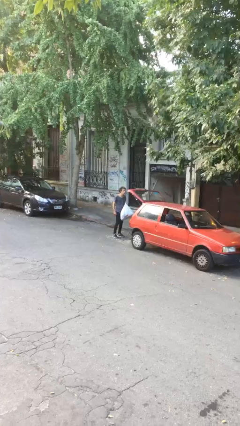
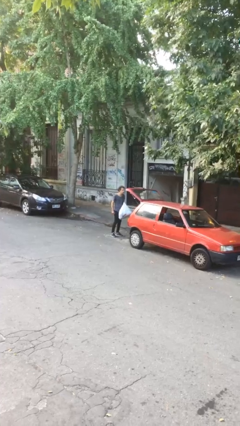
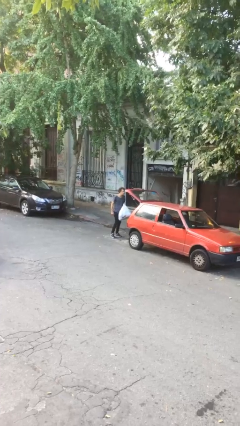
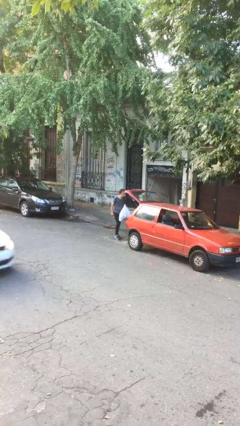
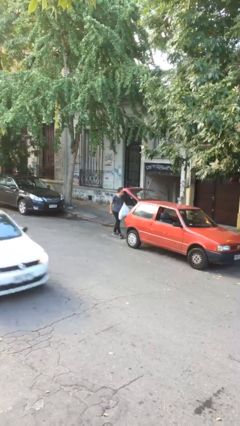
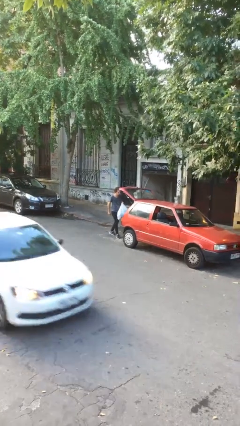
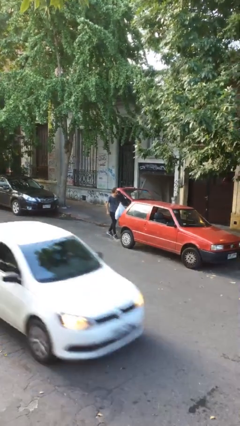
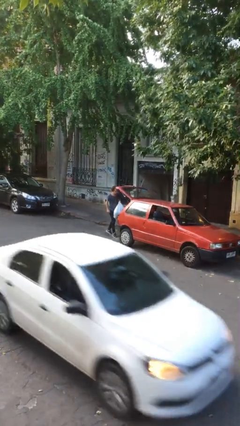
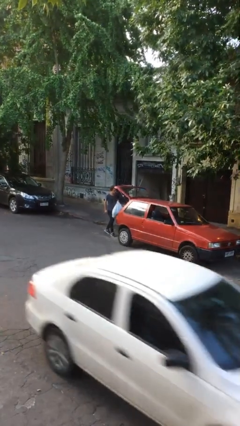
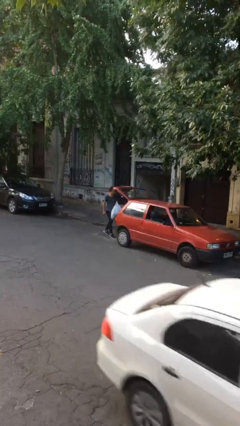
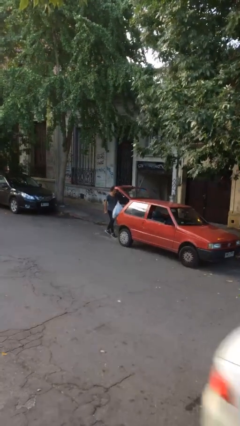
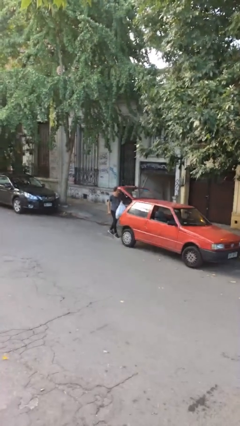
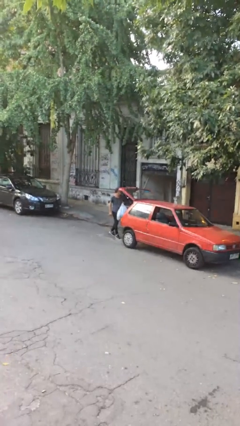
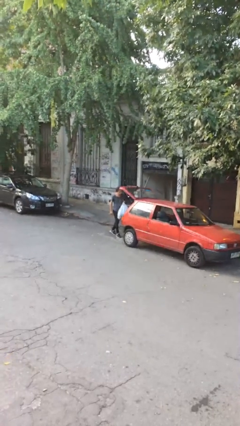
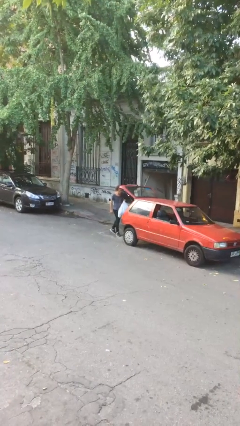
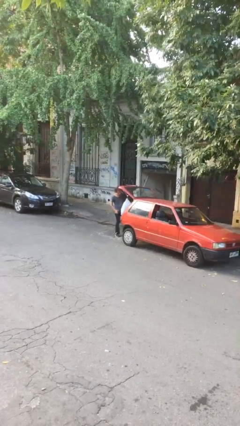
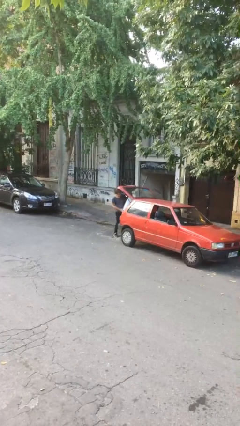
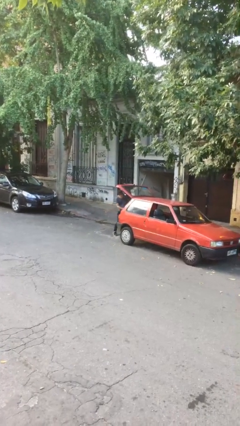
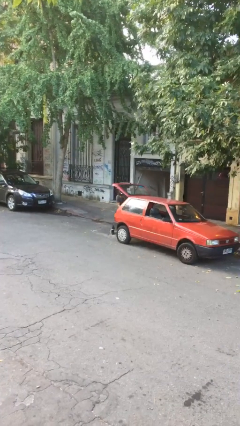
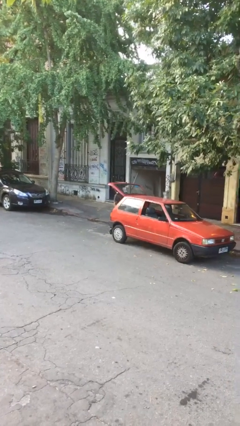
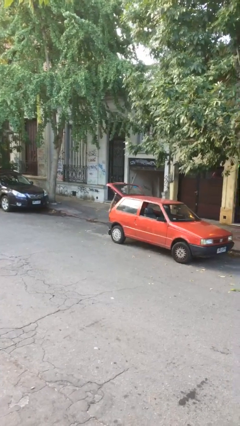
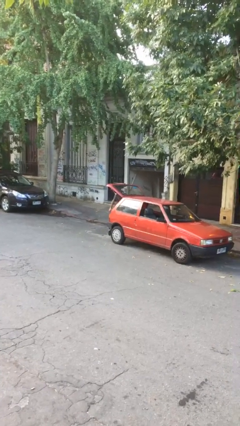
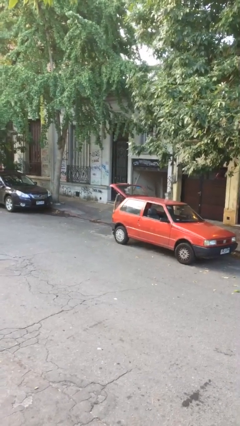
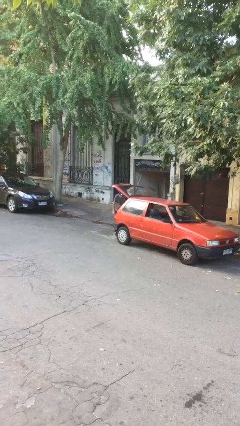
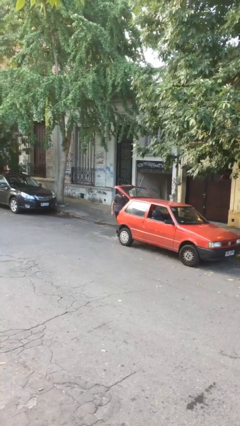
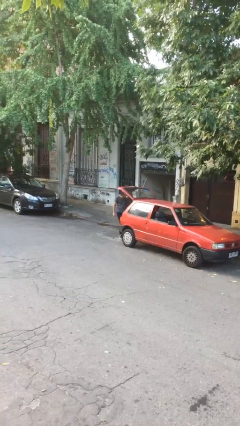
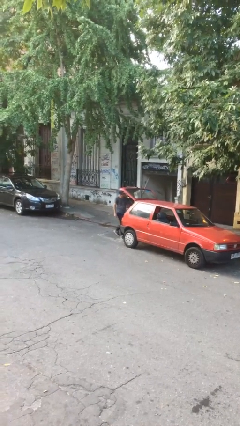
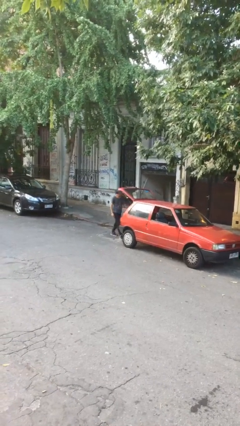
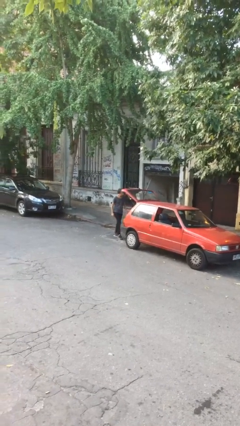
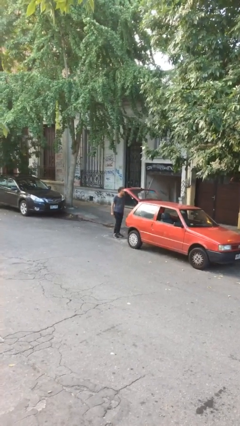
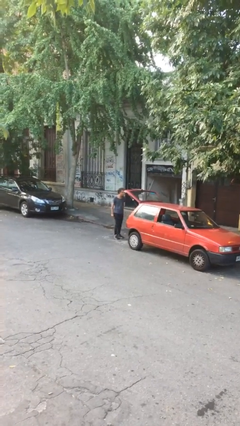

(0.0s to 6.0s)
person loads car

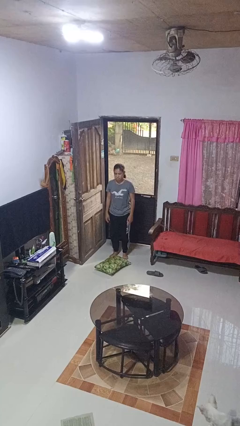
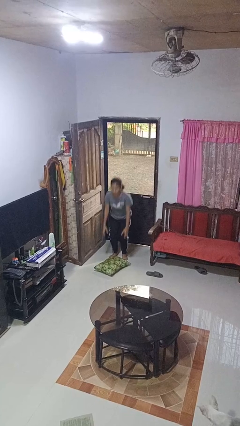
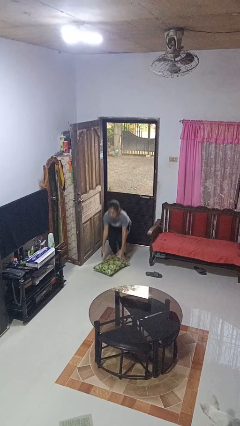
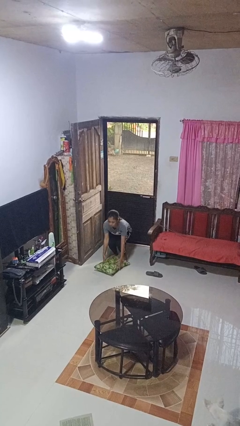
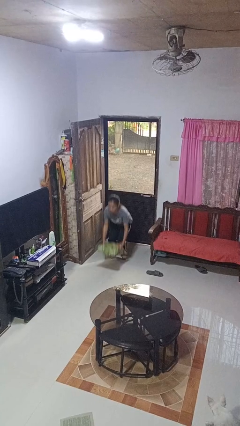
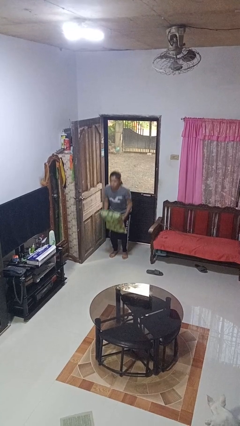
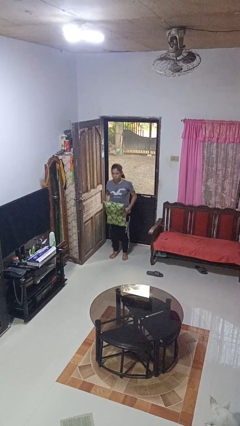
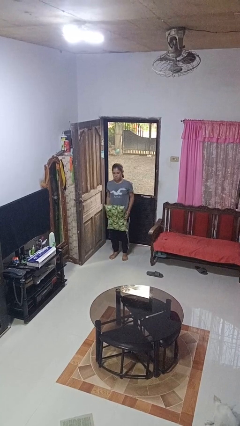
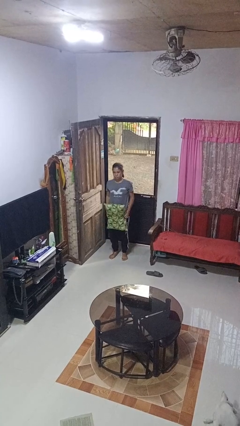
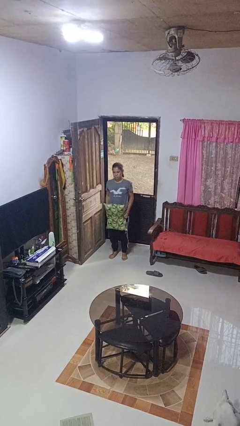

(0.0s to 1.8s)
person picks up object from floor

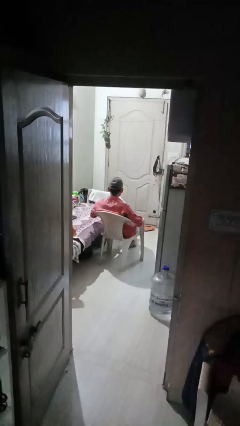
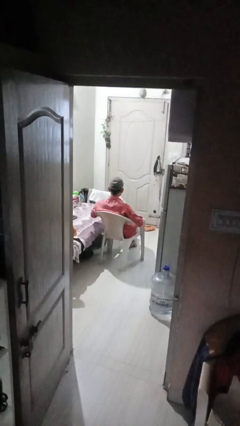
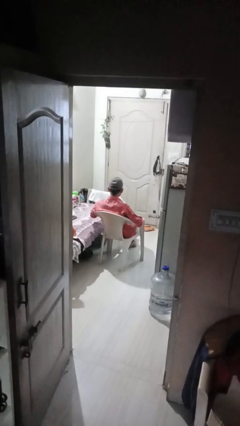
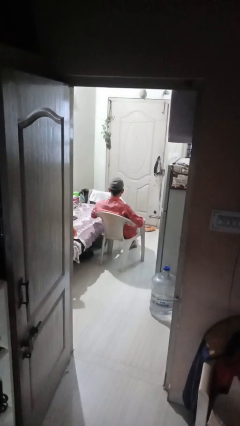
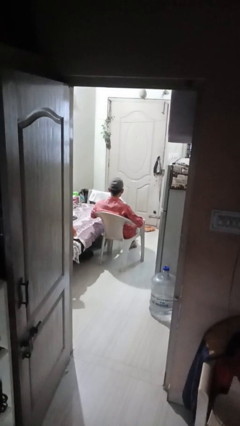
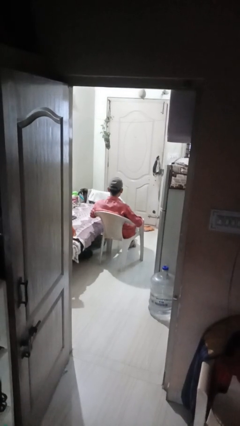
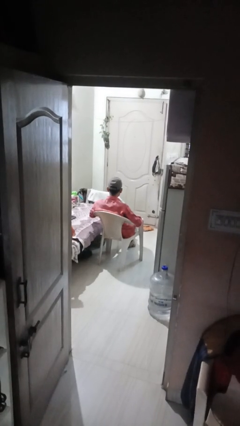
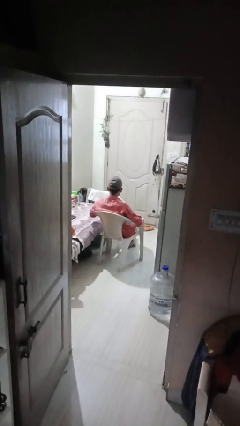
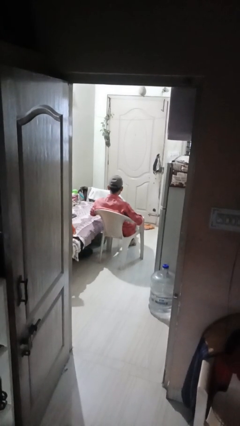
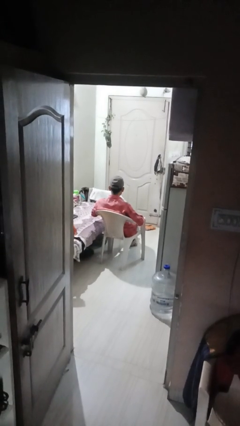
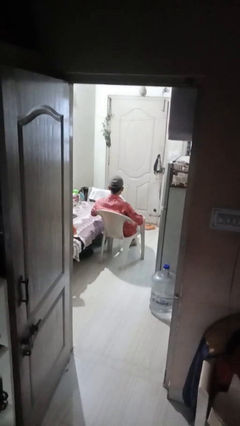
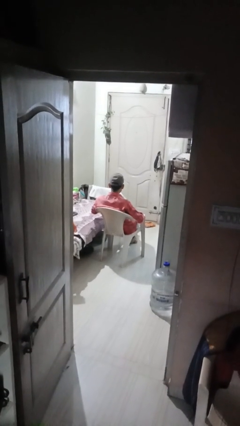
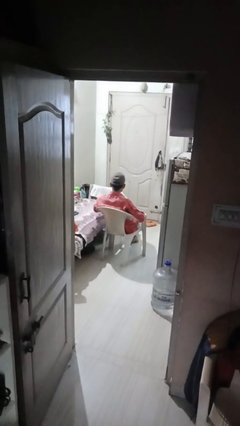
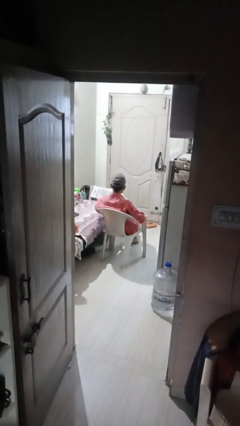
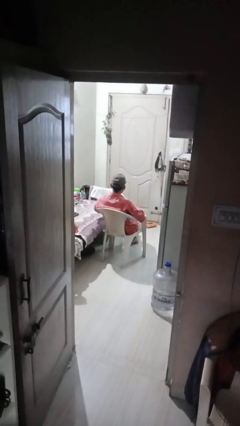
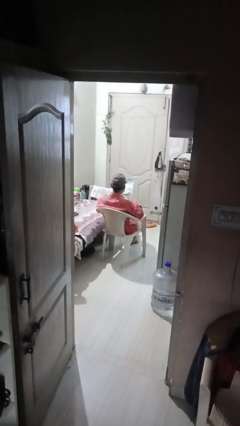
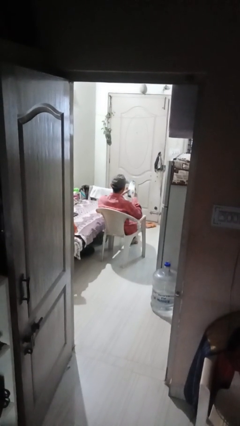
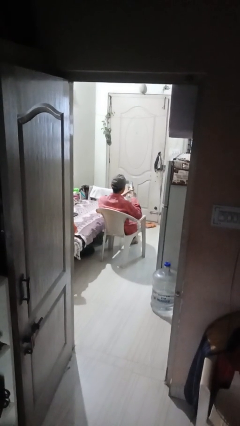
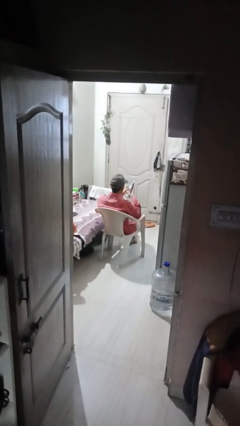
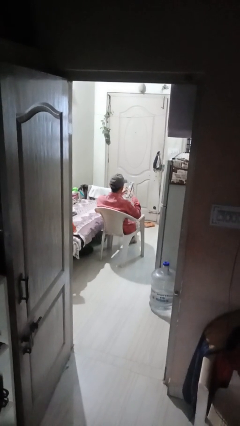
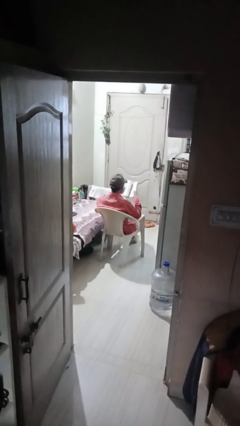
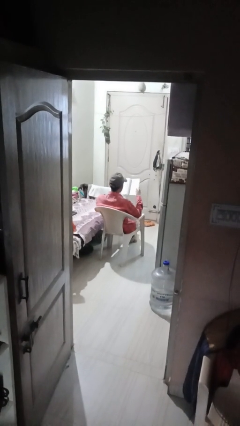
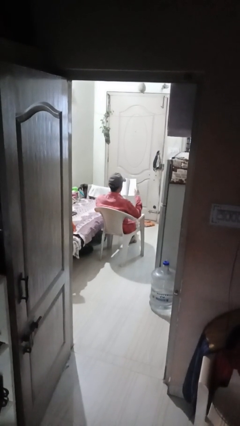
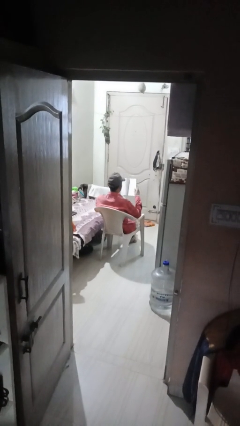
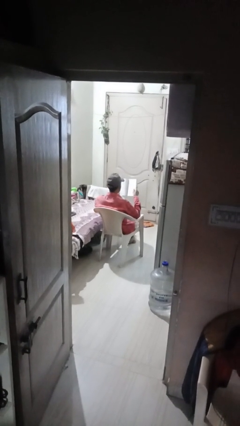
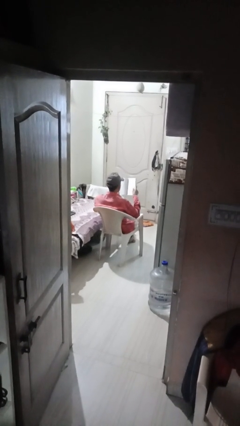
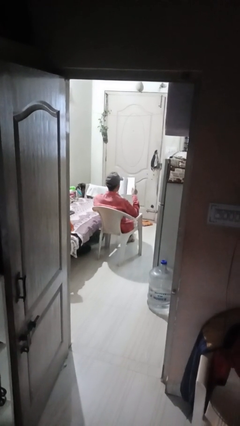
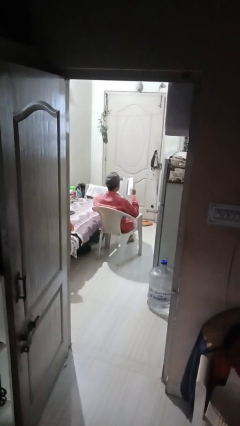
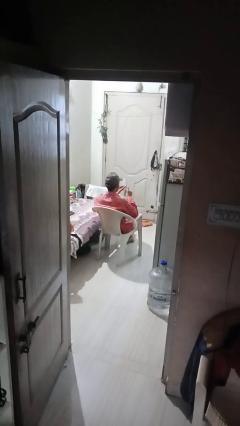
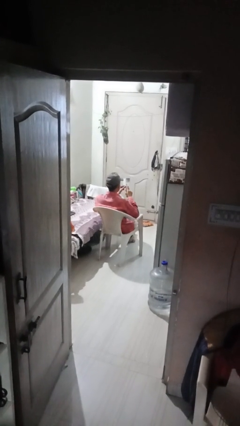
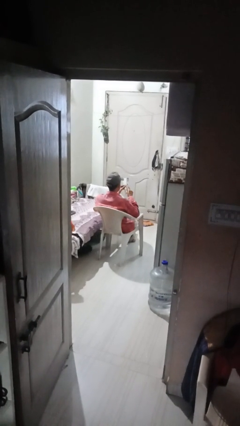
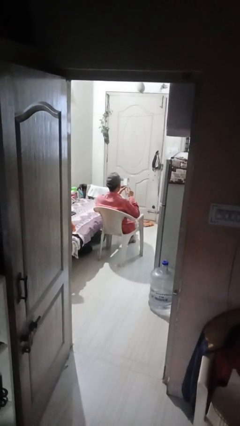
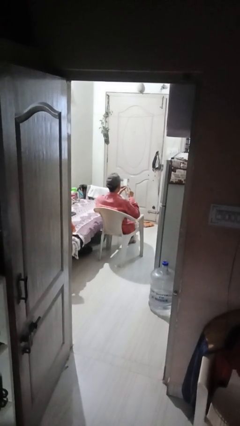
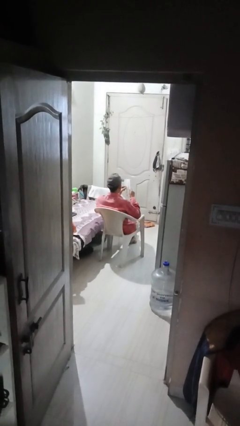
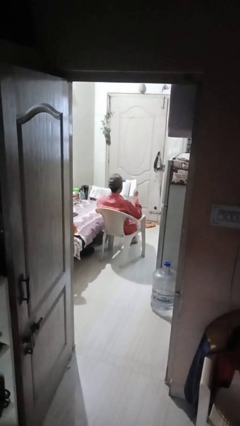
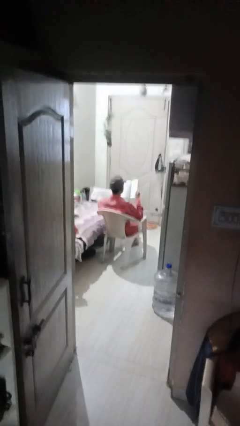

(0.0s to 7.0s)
person reads book

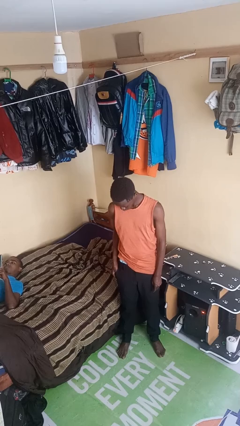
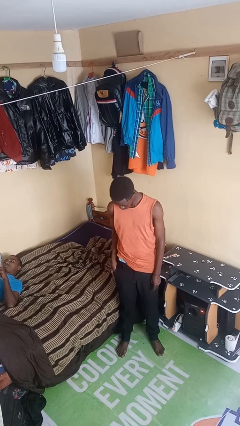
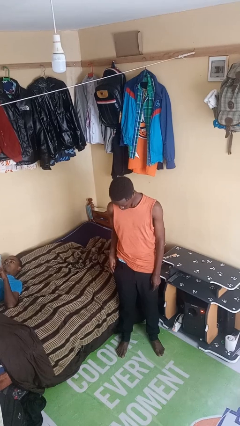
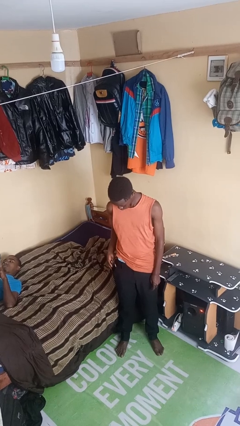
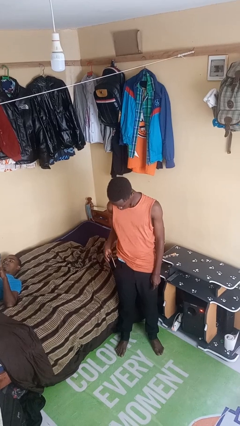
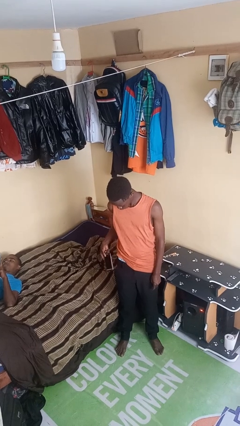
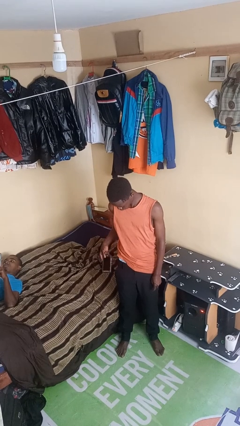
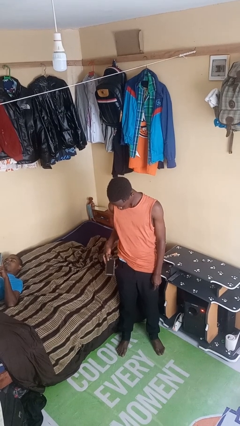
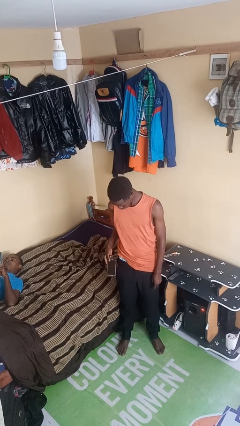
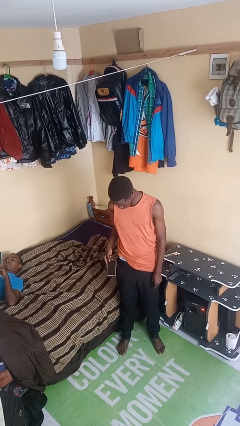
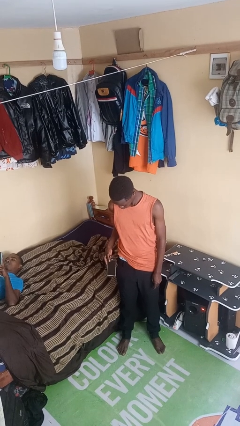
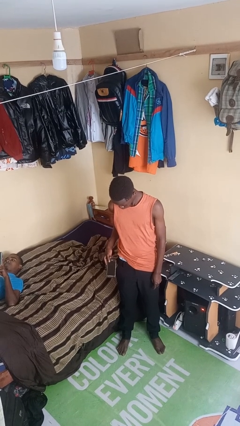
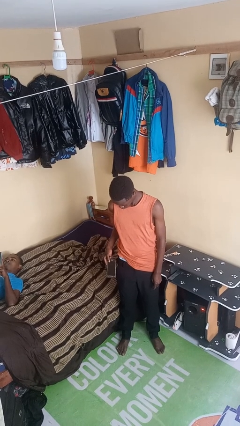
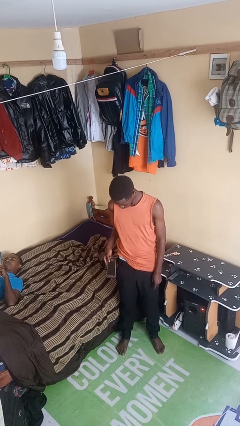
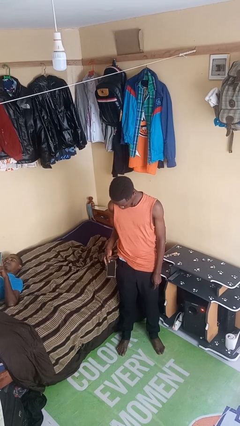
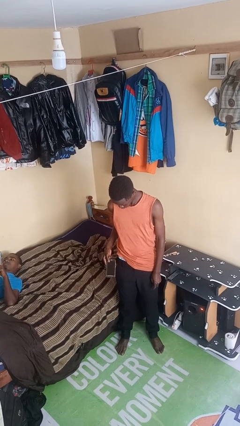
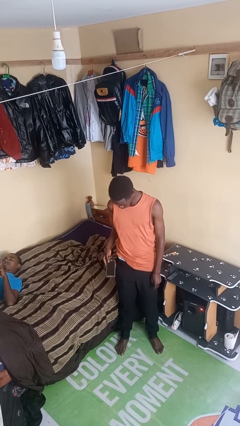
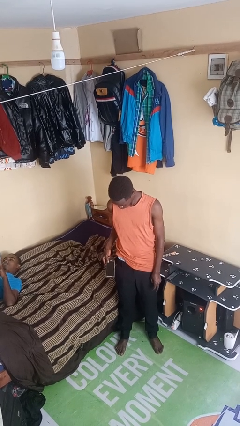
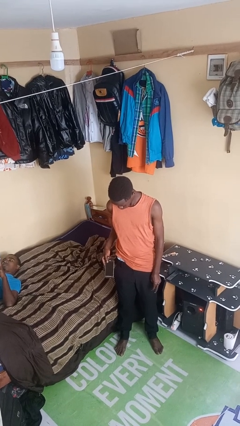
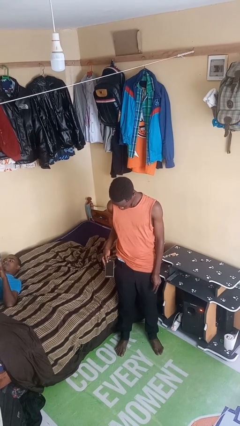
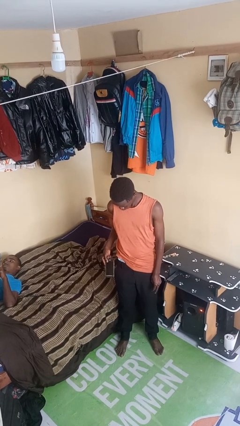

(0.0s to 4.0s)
person takes phone from pocket
